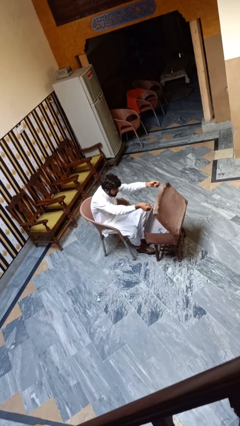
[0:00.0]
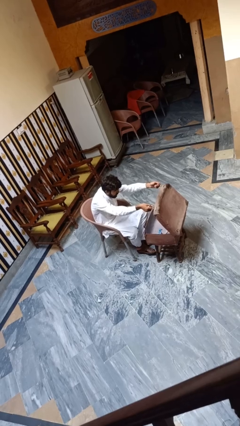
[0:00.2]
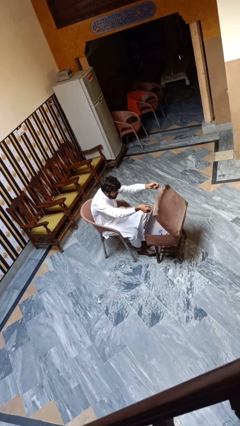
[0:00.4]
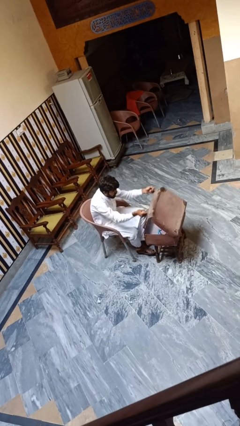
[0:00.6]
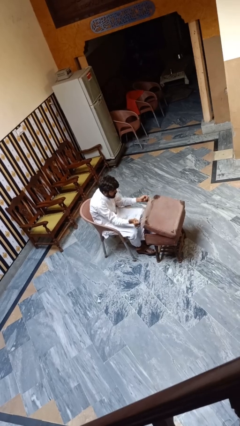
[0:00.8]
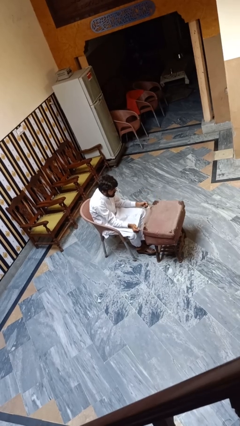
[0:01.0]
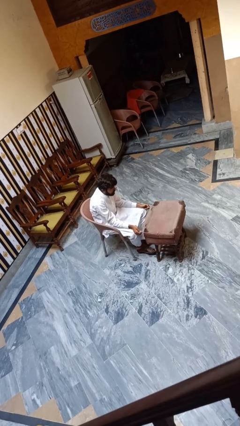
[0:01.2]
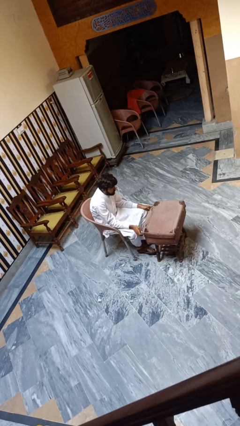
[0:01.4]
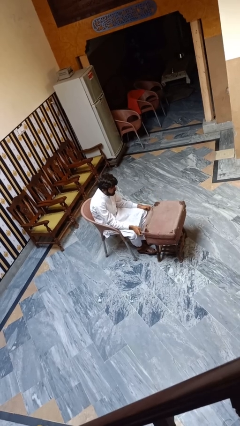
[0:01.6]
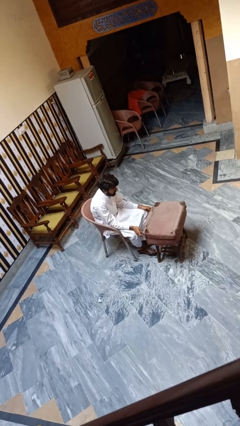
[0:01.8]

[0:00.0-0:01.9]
person closes suitcase

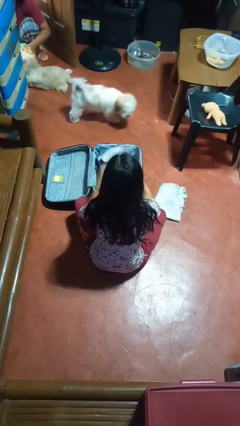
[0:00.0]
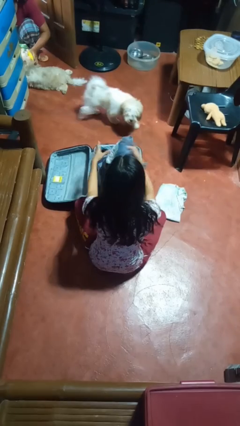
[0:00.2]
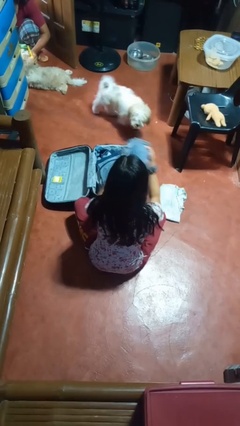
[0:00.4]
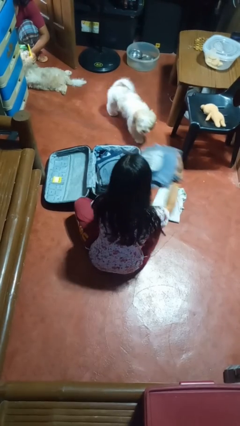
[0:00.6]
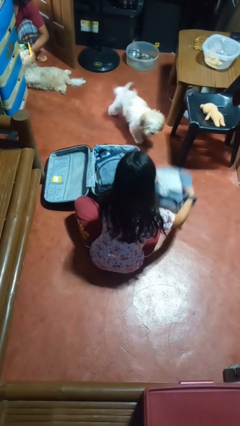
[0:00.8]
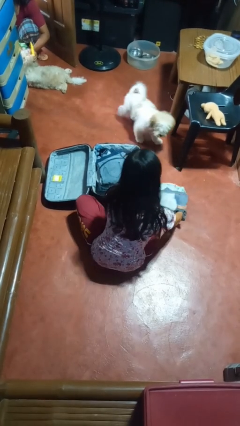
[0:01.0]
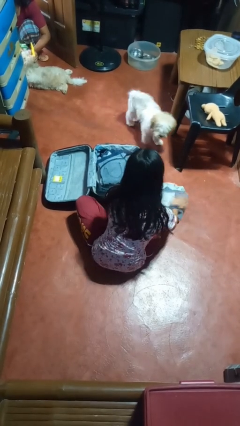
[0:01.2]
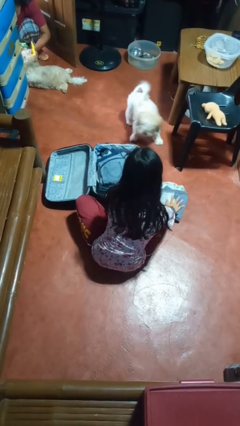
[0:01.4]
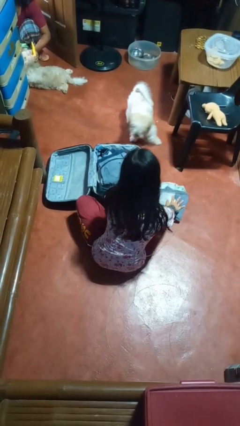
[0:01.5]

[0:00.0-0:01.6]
person unloads clothes from suitcase

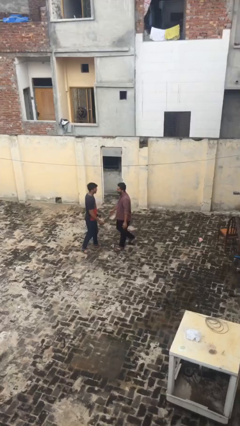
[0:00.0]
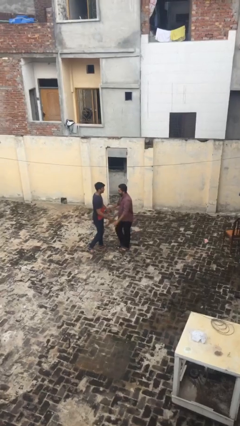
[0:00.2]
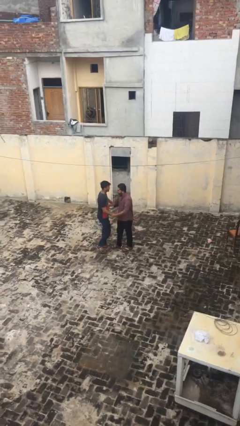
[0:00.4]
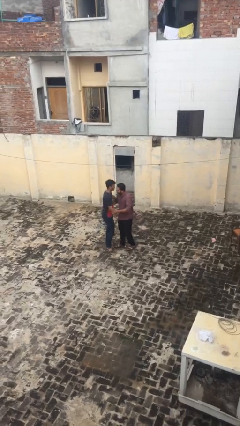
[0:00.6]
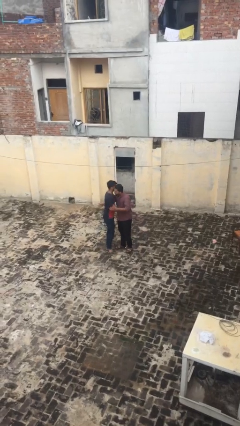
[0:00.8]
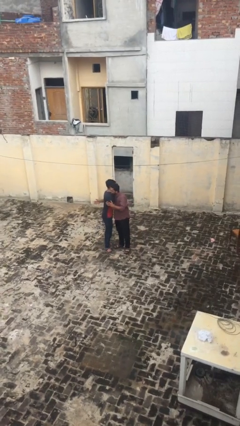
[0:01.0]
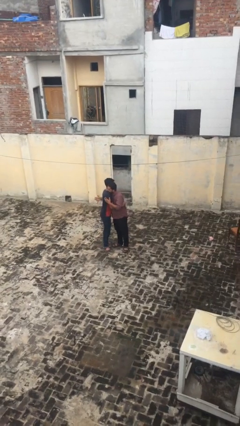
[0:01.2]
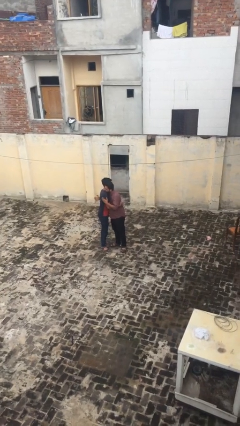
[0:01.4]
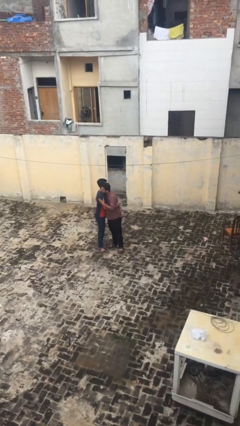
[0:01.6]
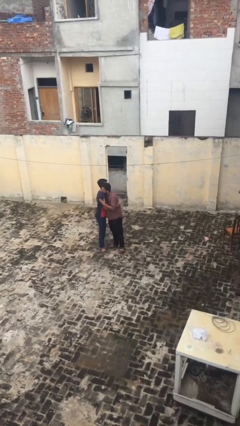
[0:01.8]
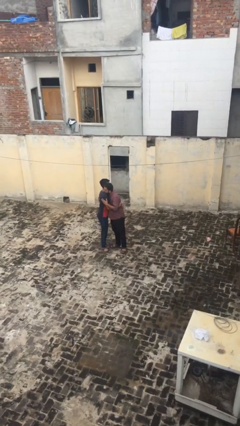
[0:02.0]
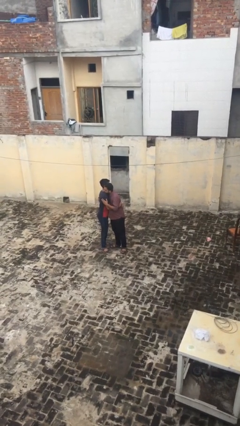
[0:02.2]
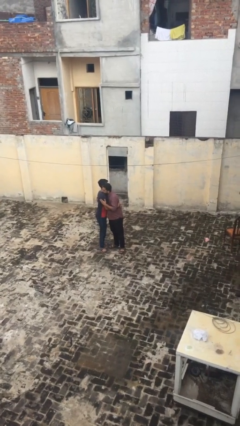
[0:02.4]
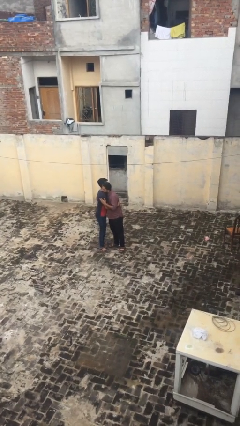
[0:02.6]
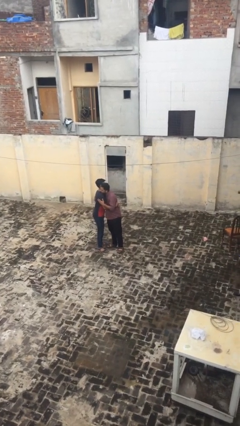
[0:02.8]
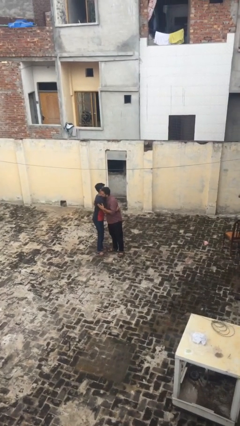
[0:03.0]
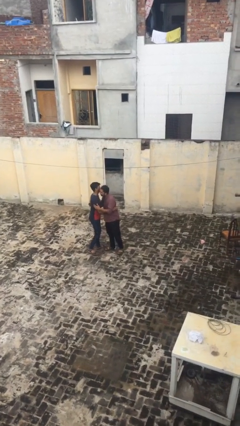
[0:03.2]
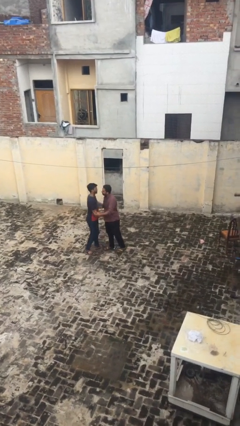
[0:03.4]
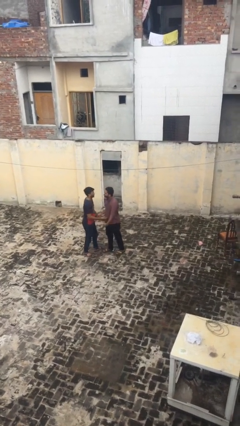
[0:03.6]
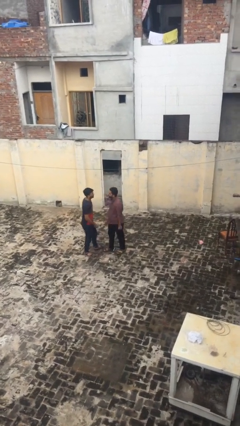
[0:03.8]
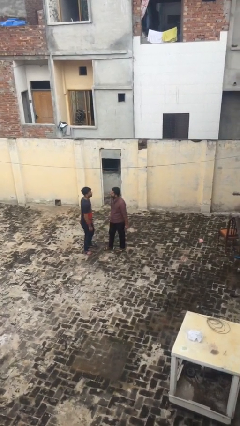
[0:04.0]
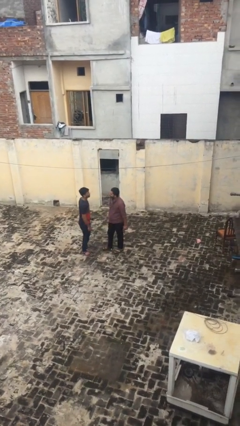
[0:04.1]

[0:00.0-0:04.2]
person embraces person

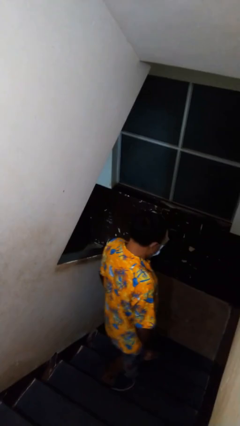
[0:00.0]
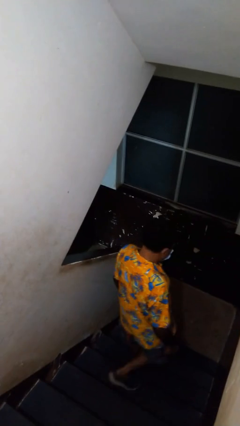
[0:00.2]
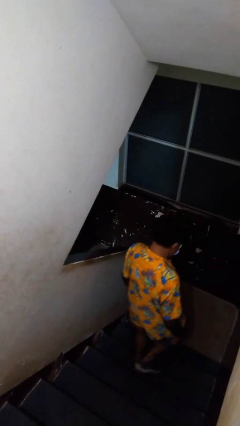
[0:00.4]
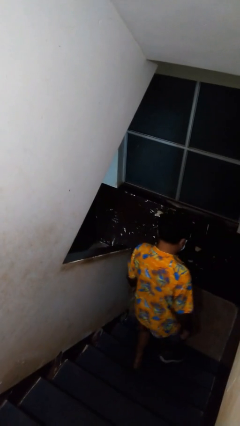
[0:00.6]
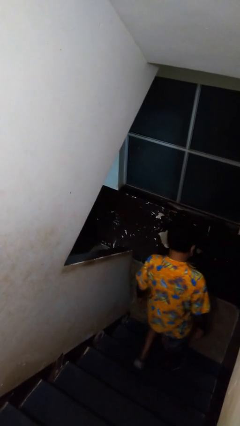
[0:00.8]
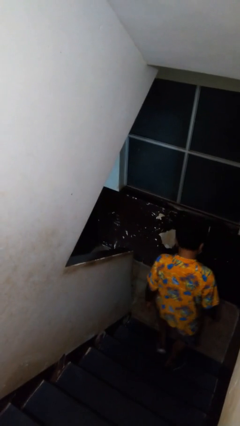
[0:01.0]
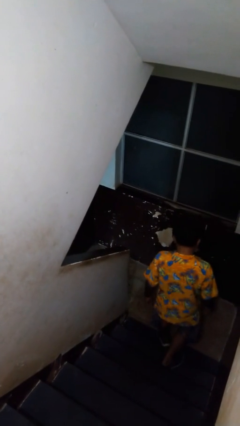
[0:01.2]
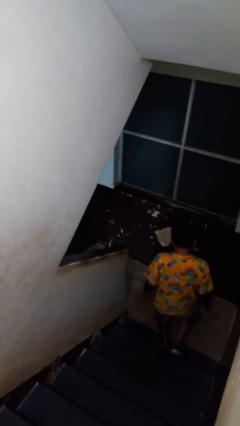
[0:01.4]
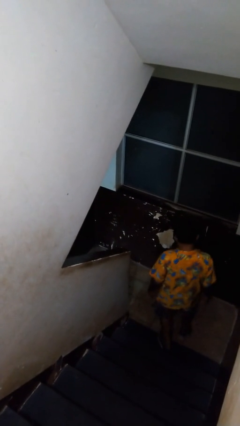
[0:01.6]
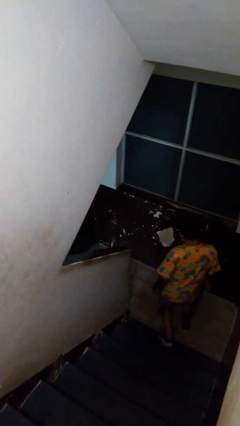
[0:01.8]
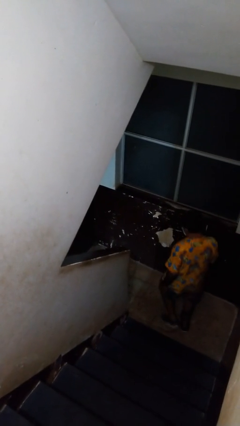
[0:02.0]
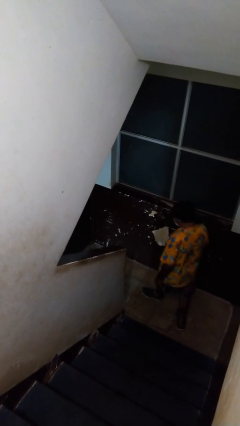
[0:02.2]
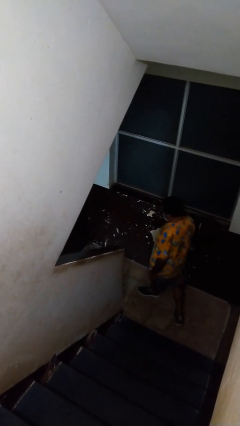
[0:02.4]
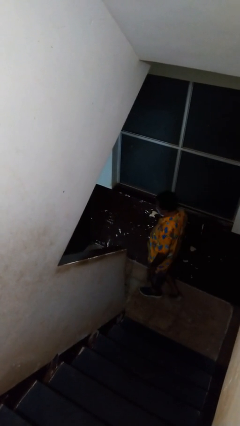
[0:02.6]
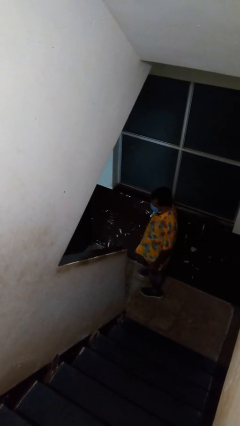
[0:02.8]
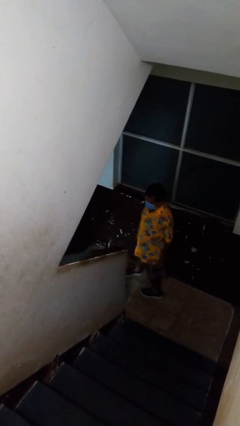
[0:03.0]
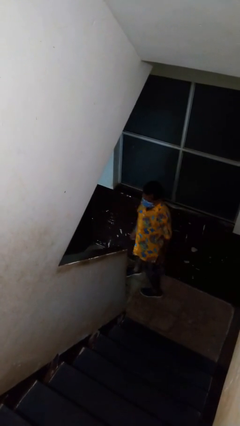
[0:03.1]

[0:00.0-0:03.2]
person climbs down stairs

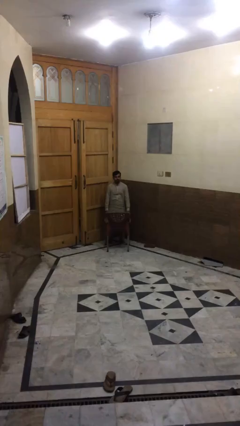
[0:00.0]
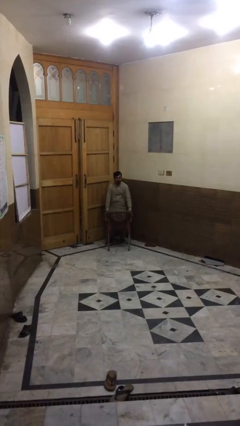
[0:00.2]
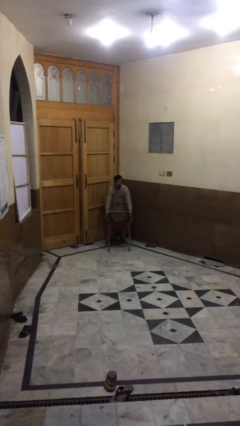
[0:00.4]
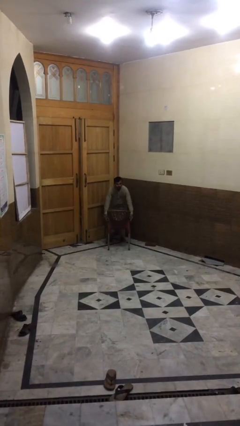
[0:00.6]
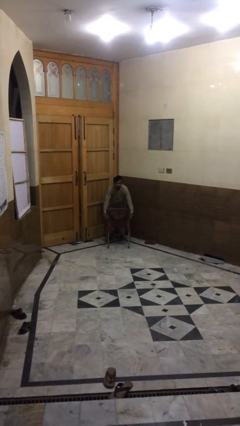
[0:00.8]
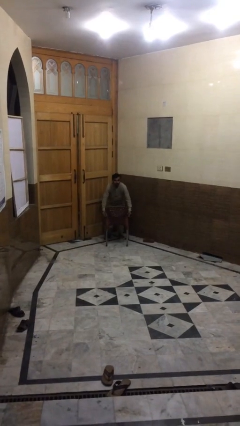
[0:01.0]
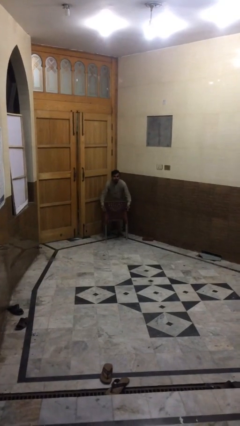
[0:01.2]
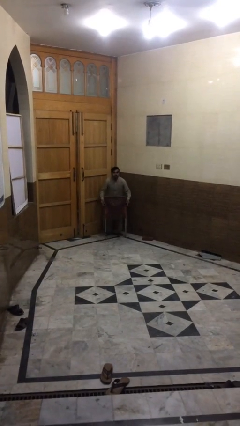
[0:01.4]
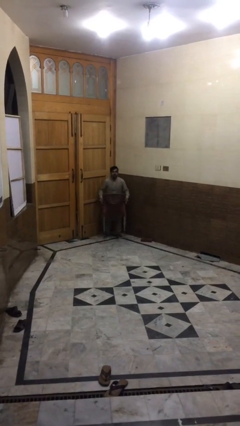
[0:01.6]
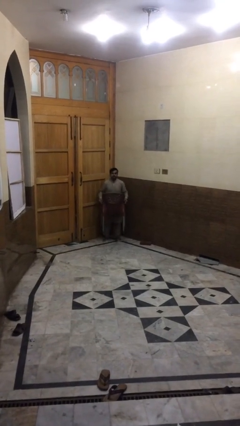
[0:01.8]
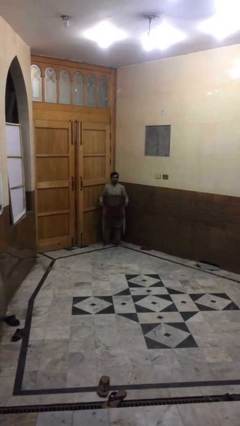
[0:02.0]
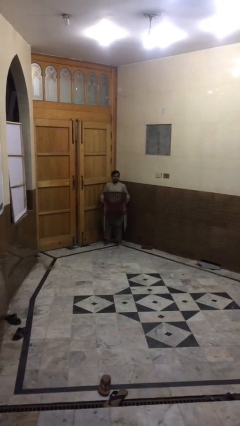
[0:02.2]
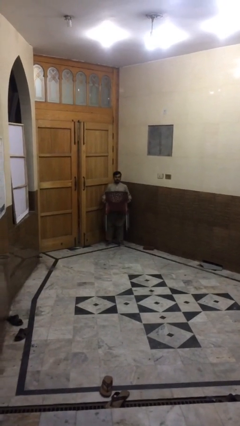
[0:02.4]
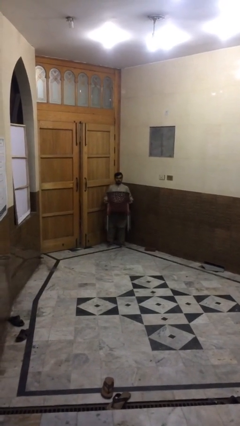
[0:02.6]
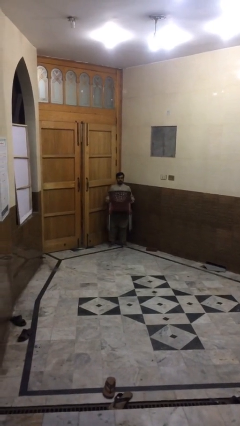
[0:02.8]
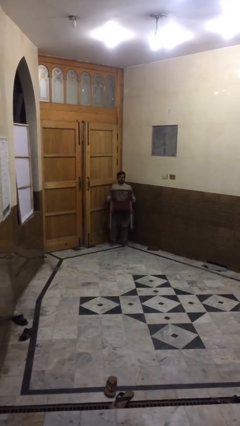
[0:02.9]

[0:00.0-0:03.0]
person picks up object from floor

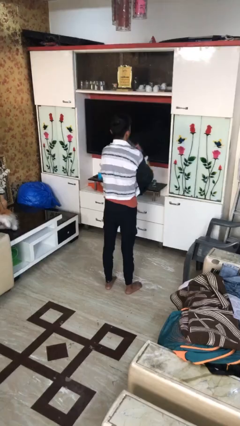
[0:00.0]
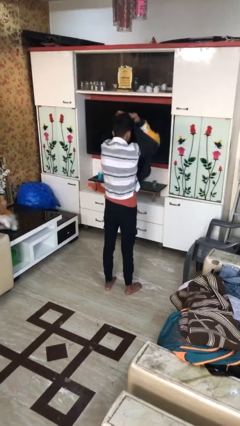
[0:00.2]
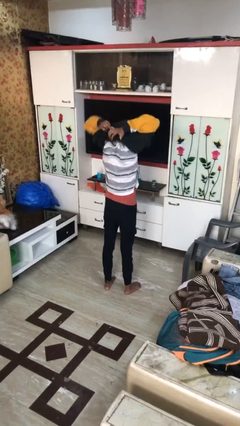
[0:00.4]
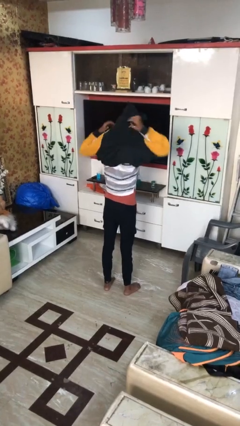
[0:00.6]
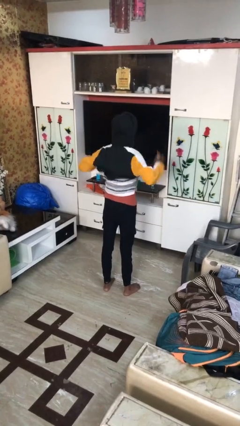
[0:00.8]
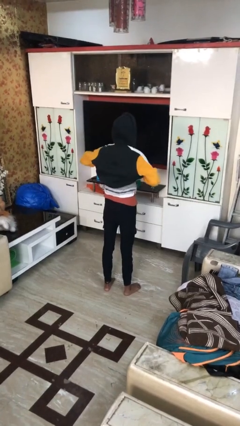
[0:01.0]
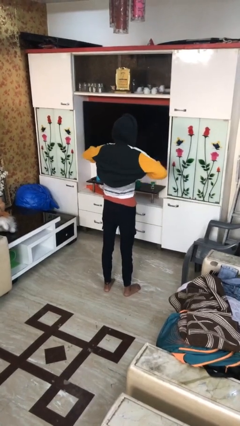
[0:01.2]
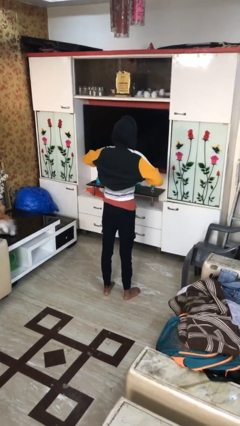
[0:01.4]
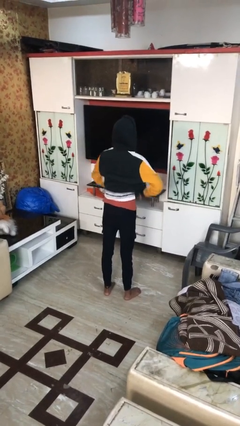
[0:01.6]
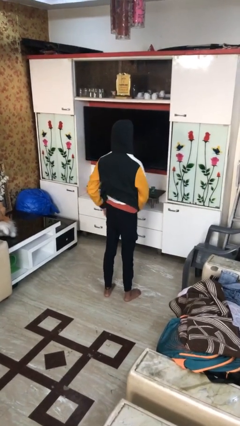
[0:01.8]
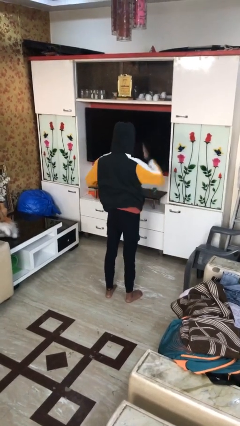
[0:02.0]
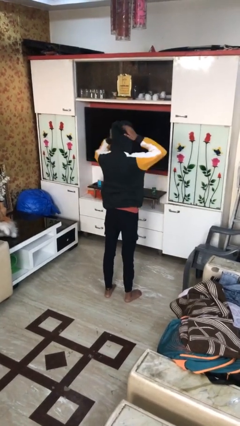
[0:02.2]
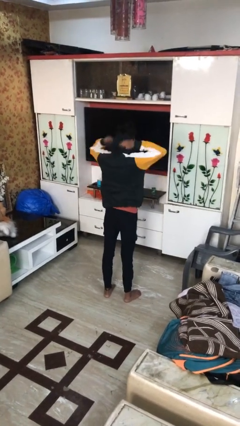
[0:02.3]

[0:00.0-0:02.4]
person puts on hoodie

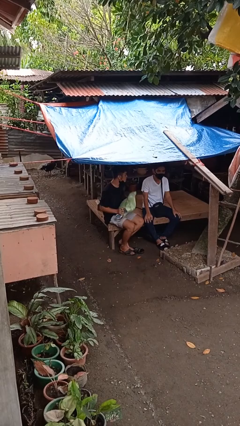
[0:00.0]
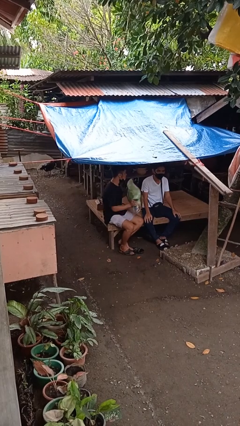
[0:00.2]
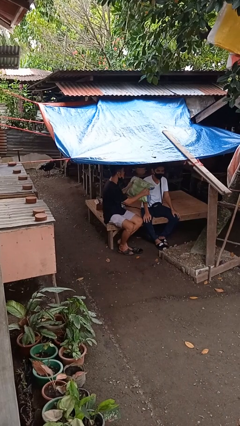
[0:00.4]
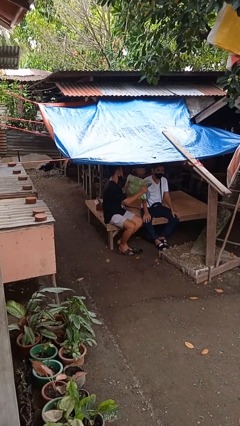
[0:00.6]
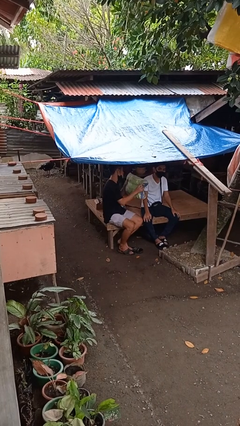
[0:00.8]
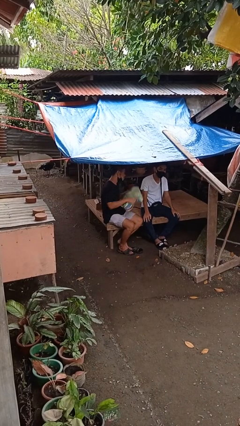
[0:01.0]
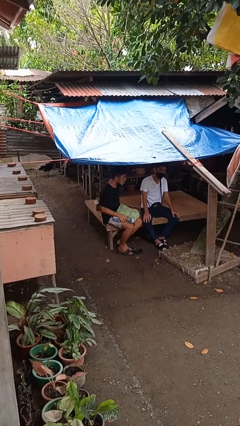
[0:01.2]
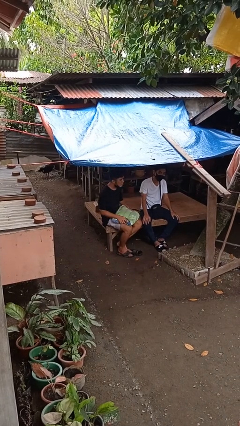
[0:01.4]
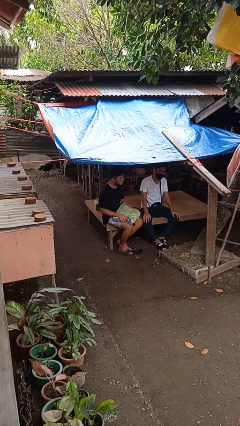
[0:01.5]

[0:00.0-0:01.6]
person hits person with pillow
